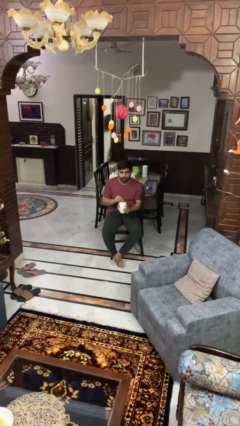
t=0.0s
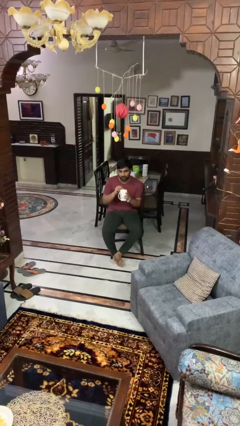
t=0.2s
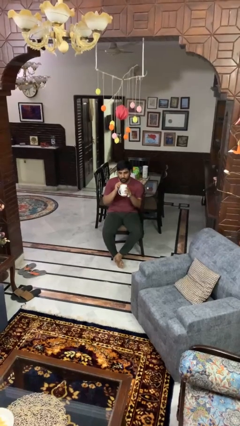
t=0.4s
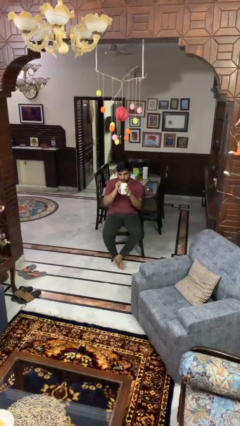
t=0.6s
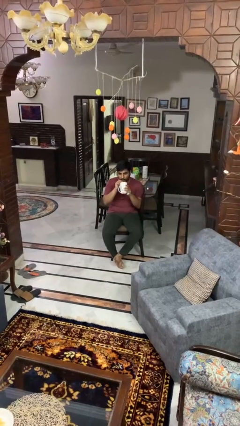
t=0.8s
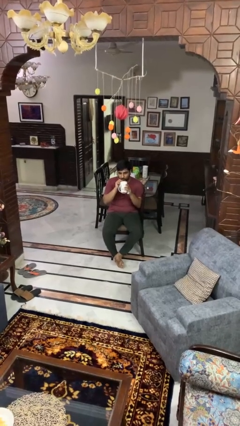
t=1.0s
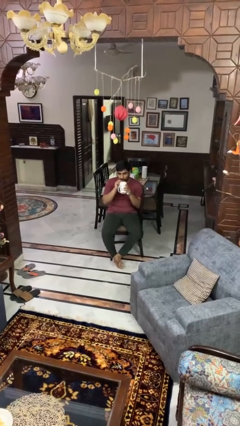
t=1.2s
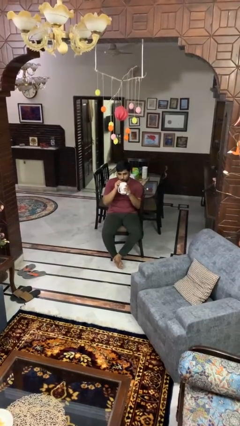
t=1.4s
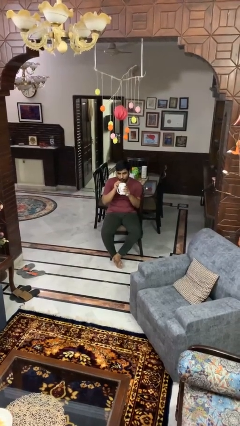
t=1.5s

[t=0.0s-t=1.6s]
person drinks from straw

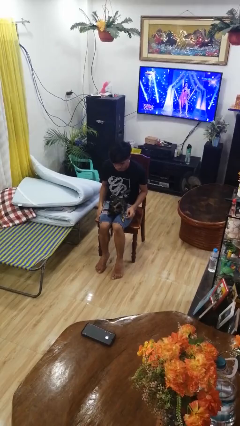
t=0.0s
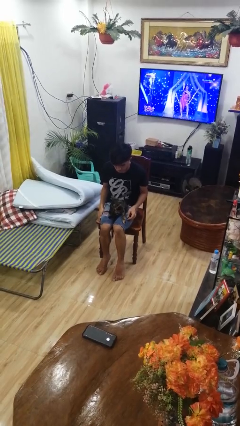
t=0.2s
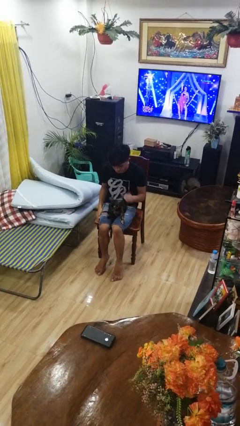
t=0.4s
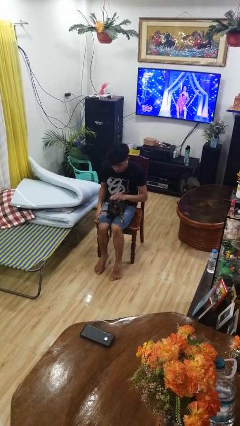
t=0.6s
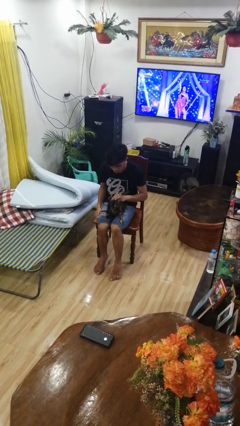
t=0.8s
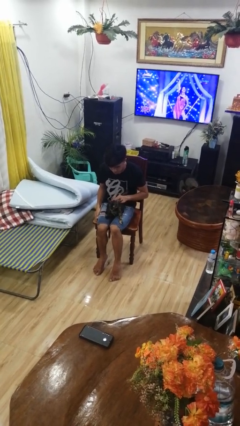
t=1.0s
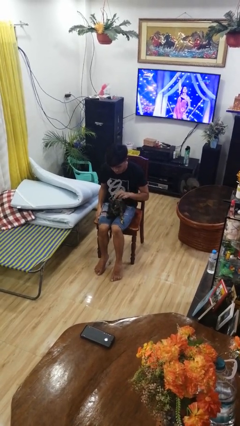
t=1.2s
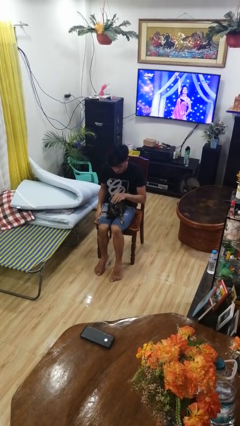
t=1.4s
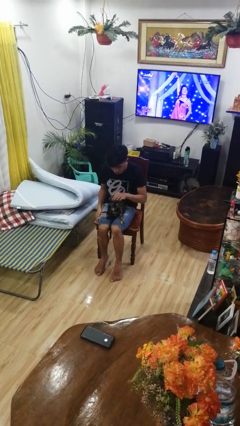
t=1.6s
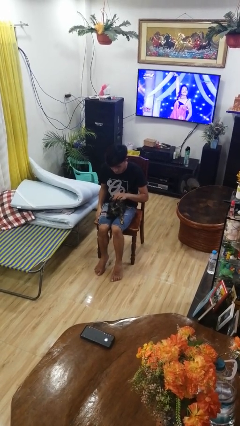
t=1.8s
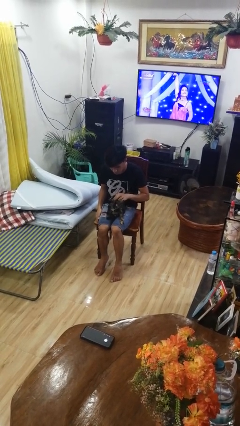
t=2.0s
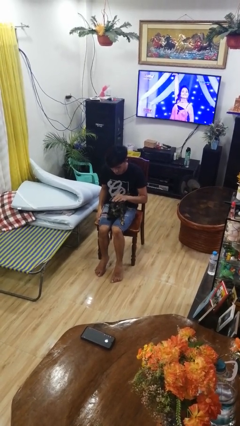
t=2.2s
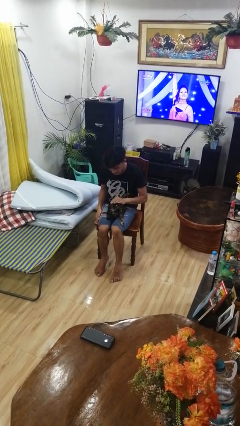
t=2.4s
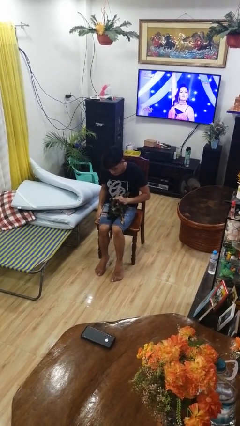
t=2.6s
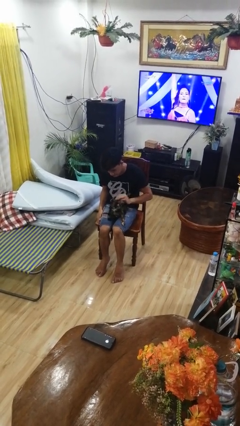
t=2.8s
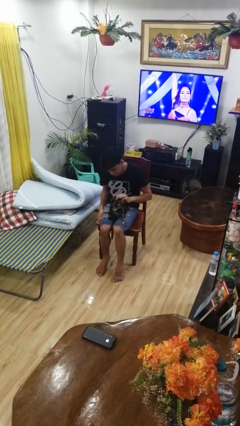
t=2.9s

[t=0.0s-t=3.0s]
person pets cat

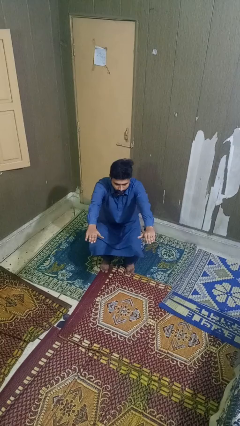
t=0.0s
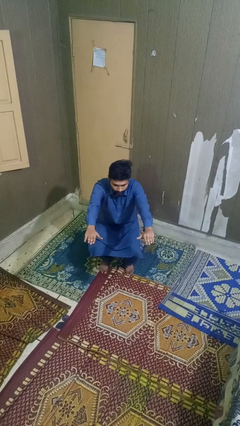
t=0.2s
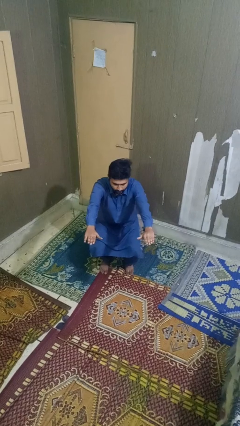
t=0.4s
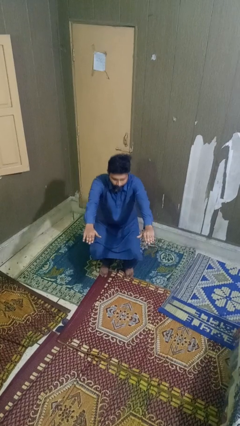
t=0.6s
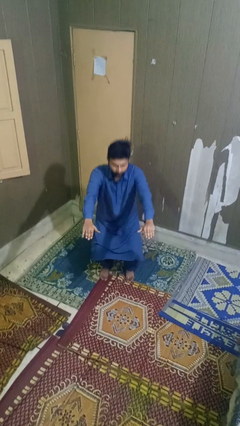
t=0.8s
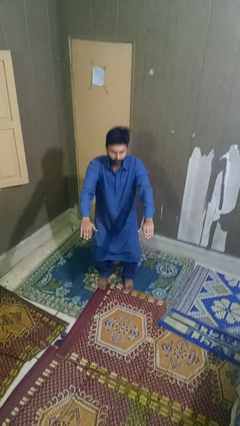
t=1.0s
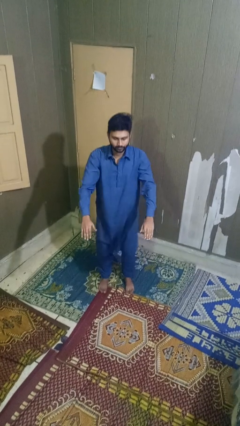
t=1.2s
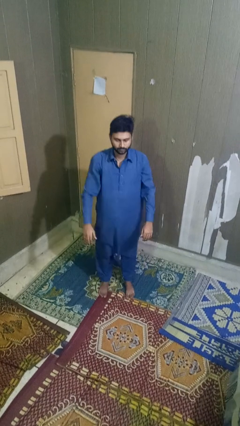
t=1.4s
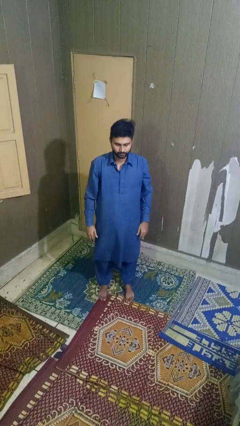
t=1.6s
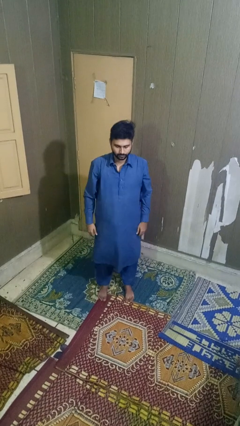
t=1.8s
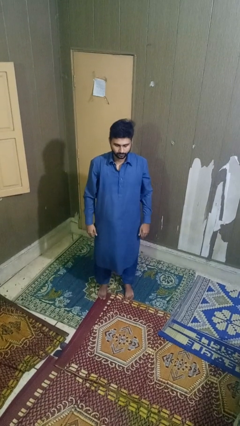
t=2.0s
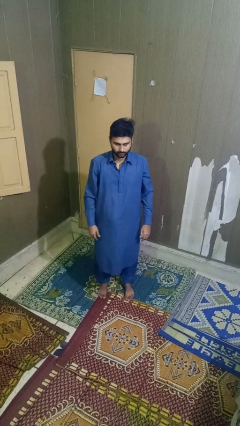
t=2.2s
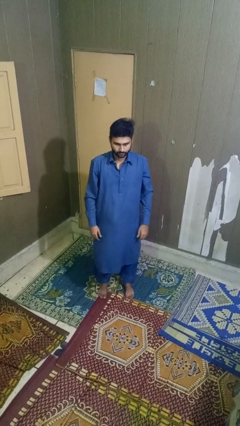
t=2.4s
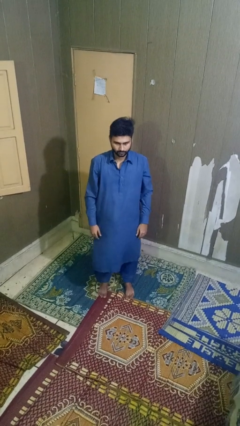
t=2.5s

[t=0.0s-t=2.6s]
person stands up

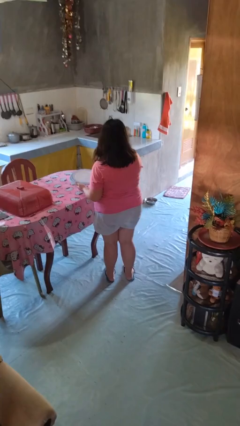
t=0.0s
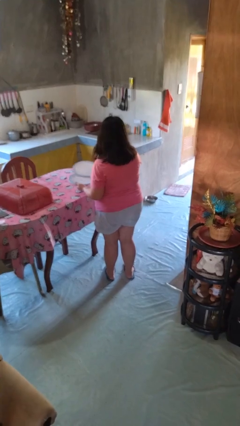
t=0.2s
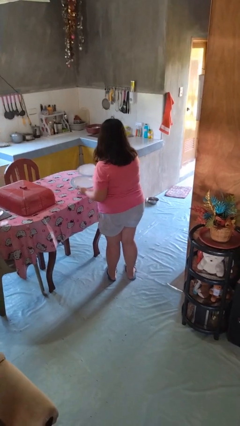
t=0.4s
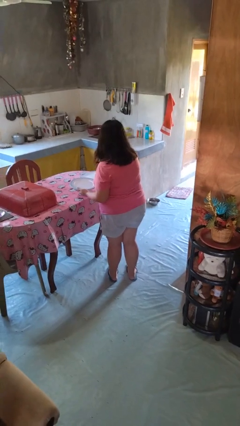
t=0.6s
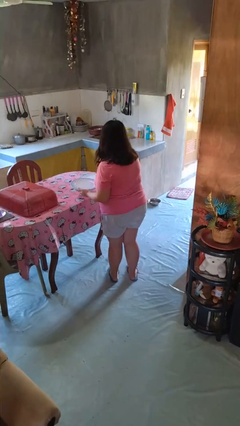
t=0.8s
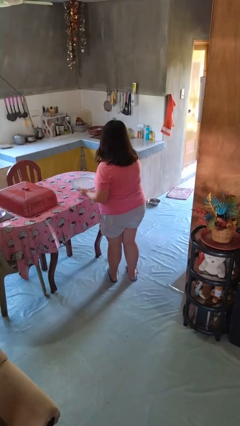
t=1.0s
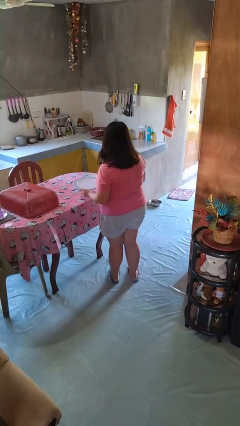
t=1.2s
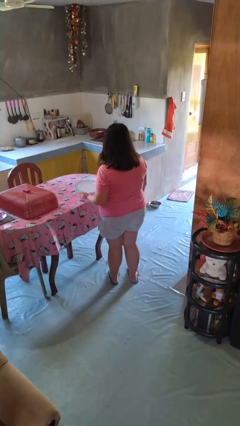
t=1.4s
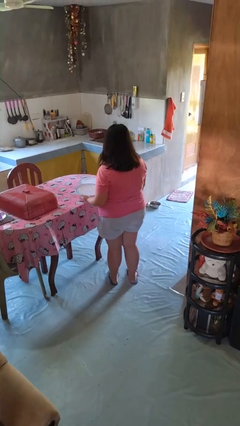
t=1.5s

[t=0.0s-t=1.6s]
person sets table

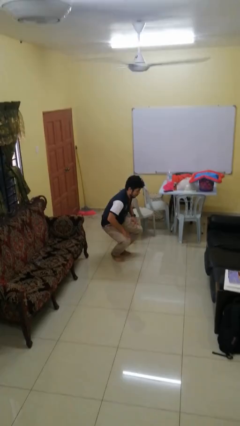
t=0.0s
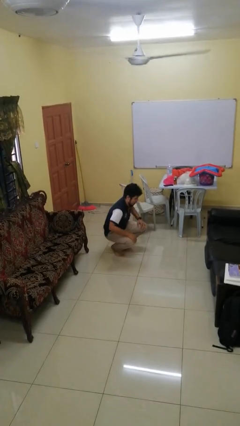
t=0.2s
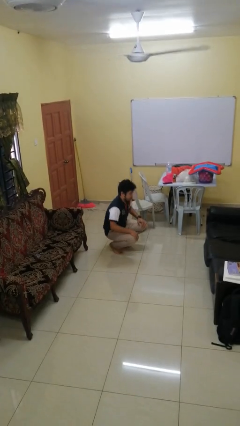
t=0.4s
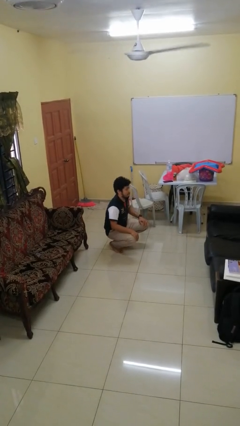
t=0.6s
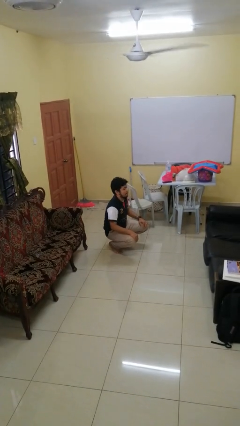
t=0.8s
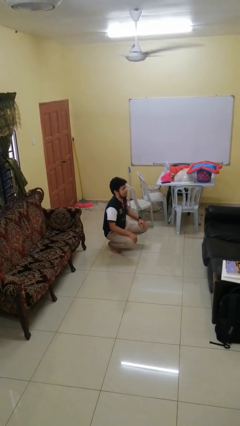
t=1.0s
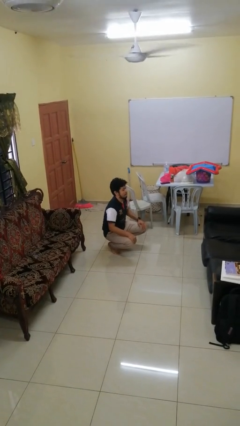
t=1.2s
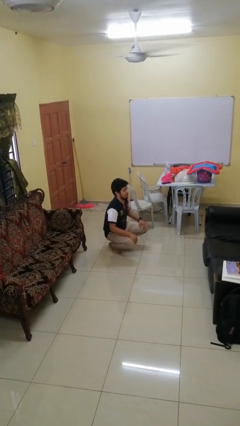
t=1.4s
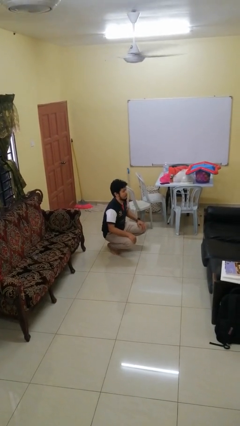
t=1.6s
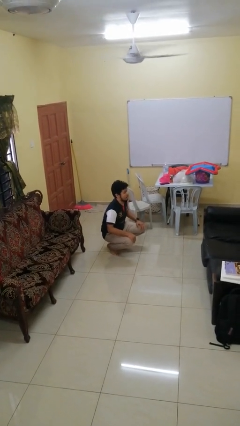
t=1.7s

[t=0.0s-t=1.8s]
person squats

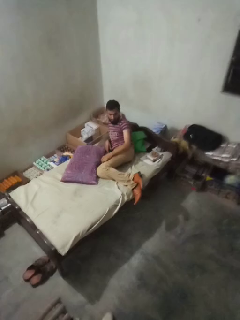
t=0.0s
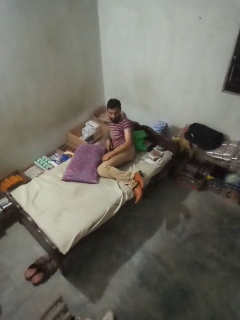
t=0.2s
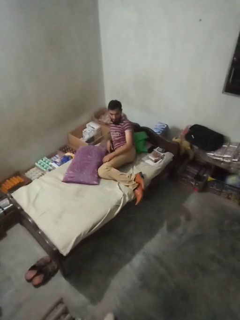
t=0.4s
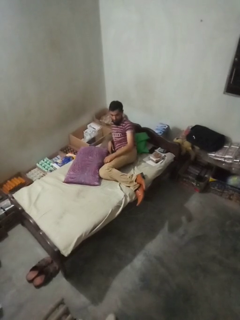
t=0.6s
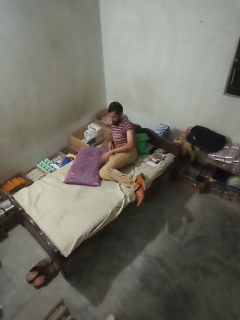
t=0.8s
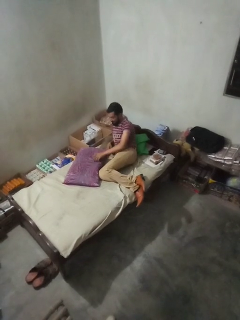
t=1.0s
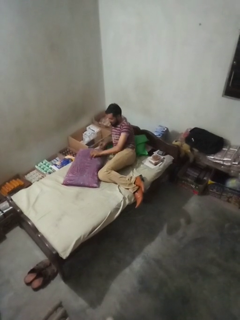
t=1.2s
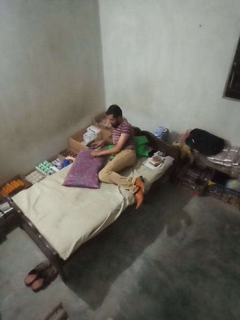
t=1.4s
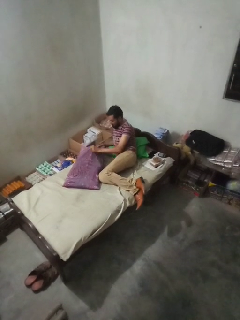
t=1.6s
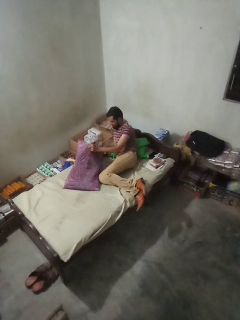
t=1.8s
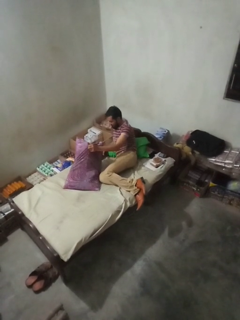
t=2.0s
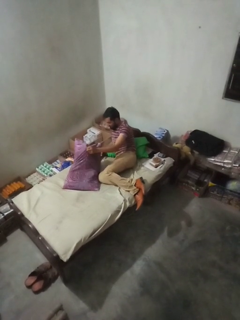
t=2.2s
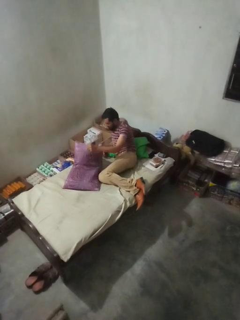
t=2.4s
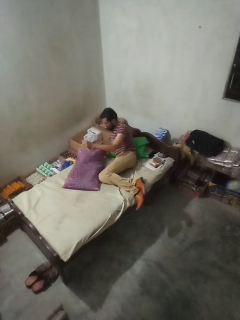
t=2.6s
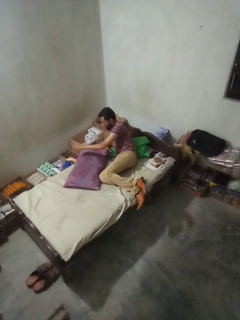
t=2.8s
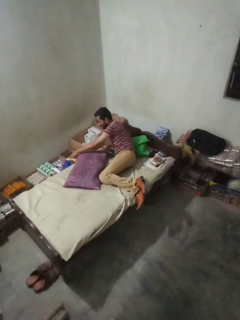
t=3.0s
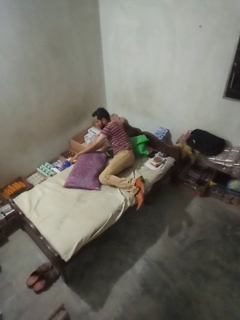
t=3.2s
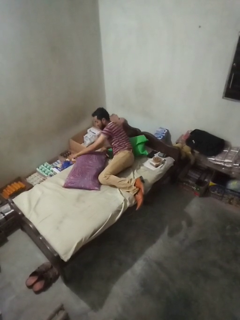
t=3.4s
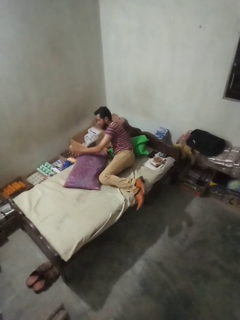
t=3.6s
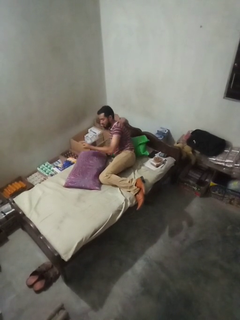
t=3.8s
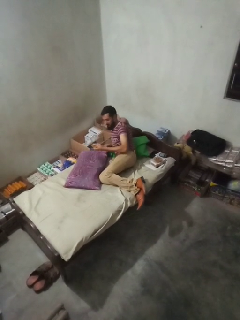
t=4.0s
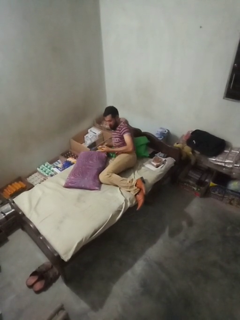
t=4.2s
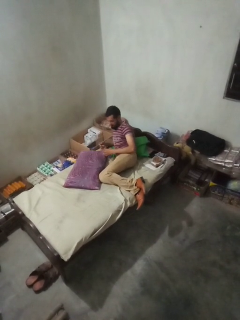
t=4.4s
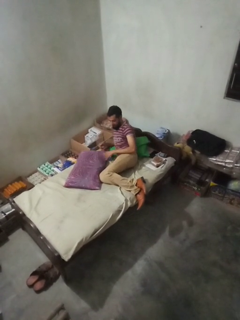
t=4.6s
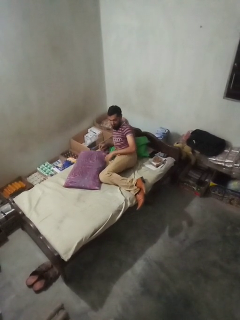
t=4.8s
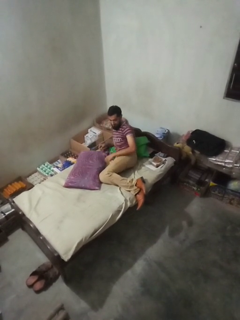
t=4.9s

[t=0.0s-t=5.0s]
person searches under bed

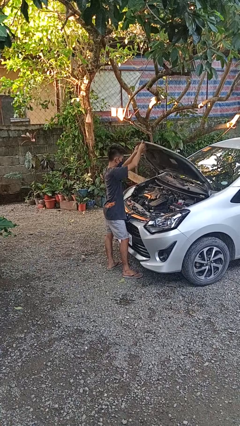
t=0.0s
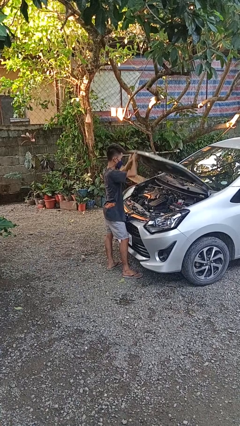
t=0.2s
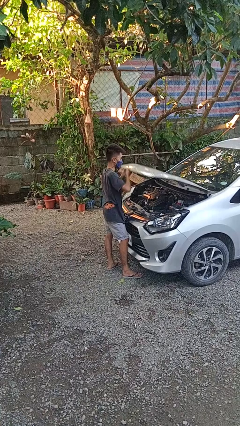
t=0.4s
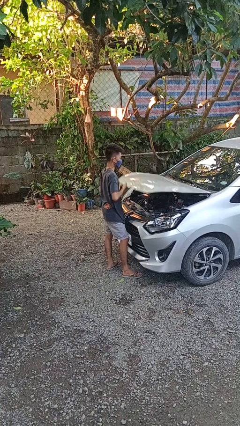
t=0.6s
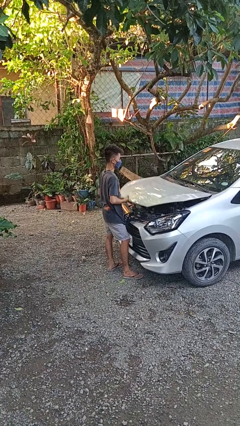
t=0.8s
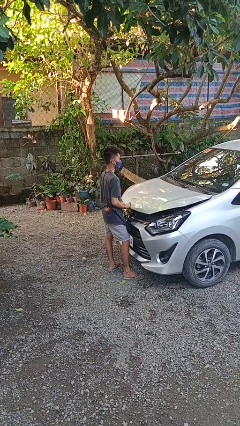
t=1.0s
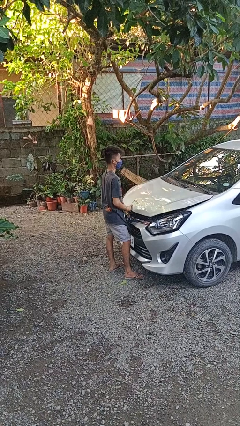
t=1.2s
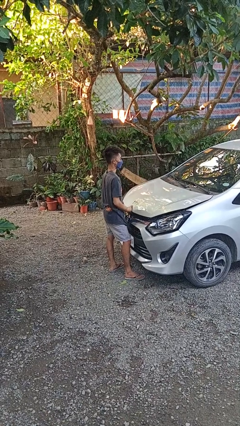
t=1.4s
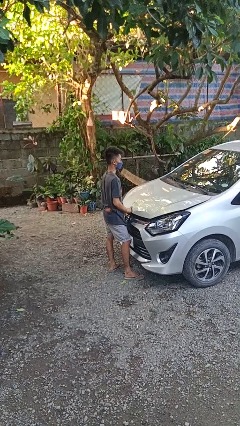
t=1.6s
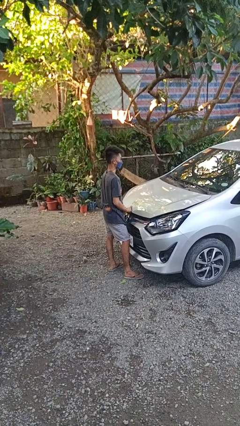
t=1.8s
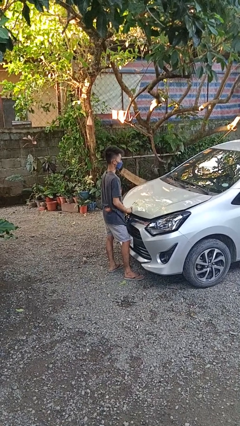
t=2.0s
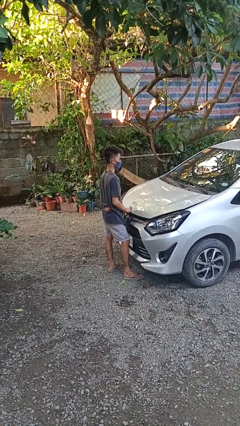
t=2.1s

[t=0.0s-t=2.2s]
person closes car hood

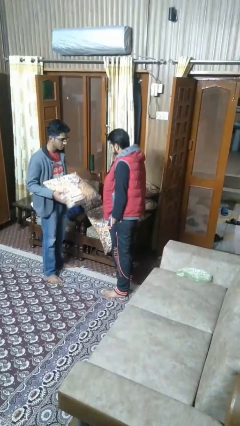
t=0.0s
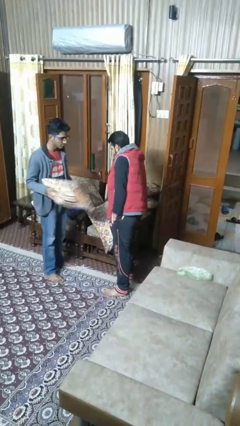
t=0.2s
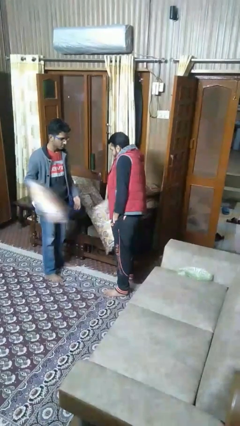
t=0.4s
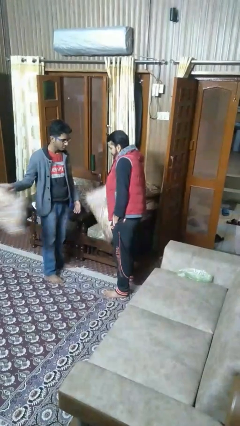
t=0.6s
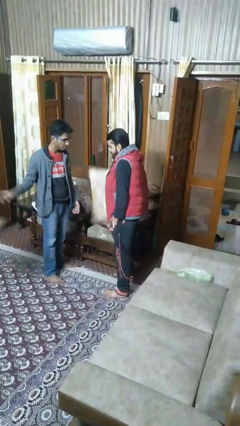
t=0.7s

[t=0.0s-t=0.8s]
person transfers object to person
